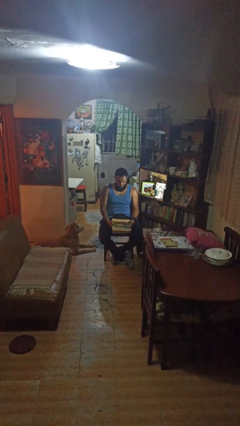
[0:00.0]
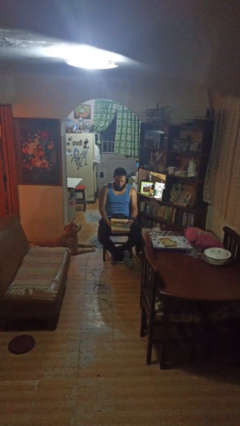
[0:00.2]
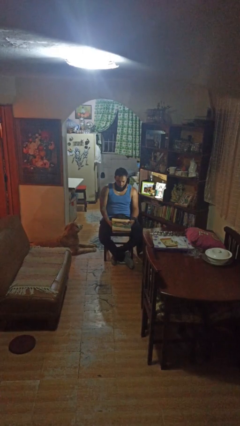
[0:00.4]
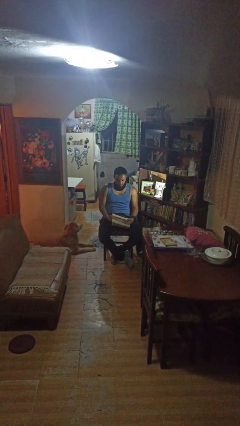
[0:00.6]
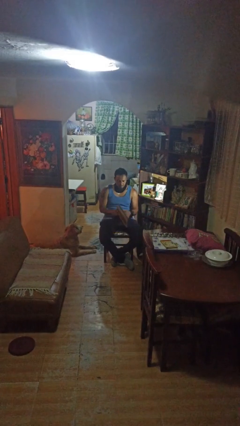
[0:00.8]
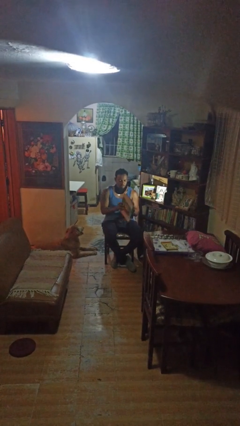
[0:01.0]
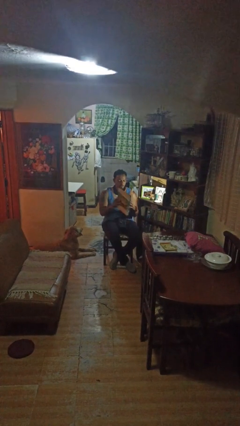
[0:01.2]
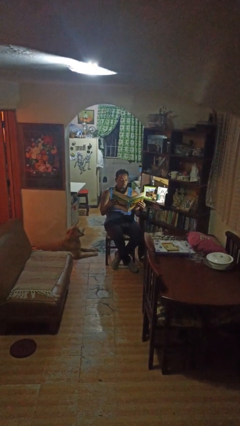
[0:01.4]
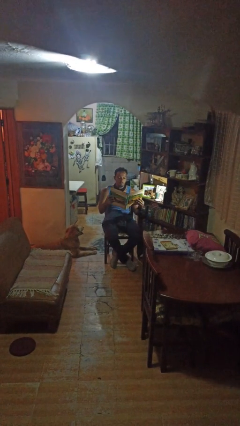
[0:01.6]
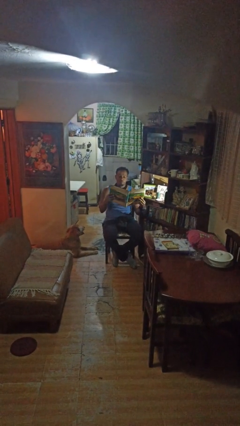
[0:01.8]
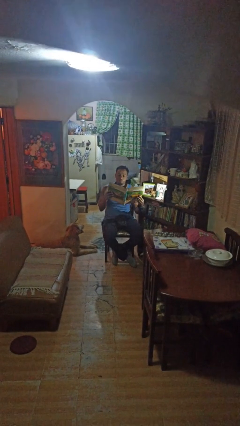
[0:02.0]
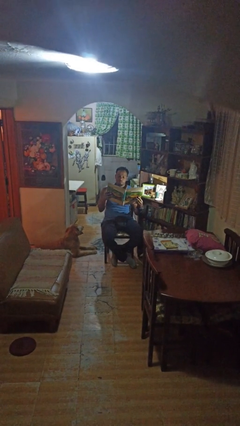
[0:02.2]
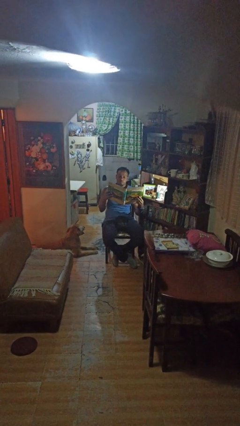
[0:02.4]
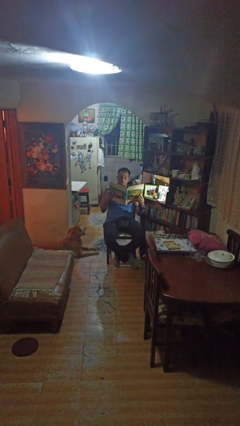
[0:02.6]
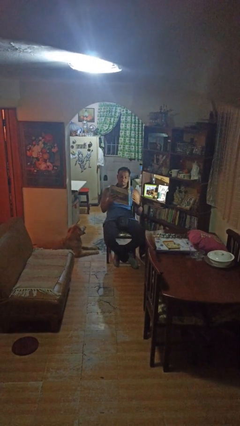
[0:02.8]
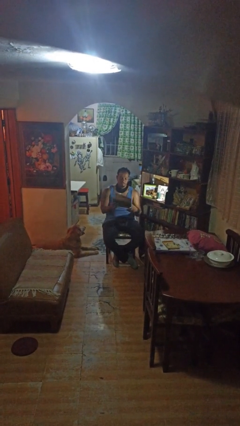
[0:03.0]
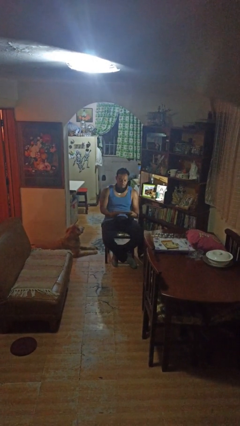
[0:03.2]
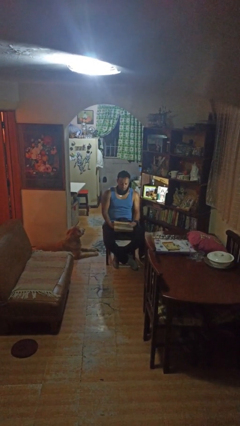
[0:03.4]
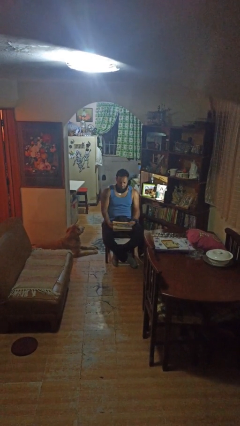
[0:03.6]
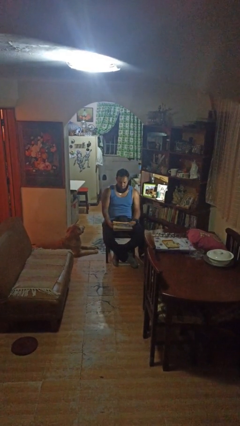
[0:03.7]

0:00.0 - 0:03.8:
person reads document

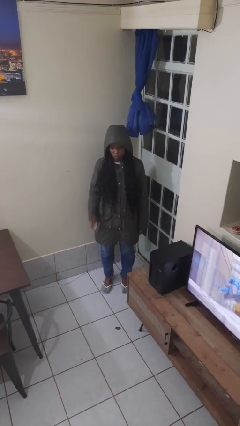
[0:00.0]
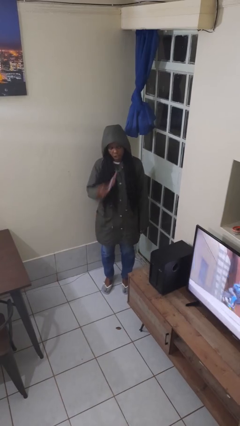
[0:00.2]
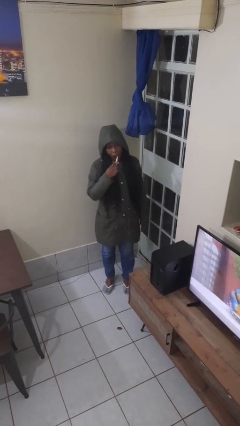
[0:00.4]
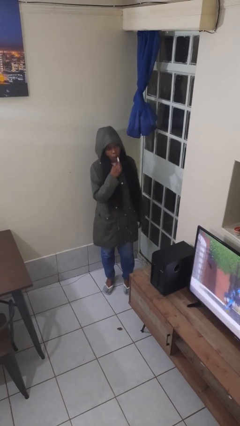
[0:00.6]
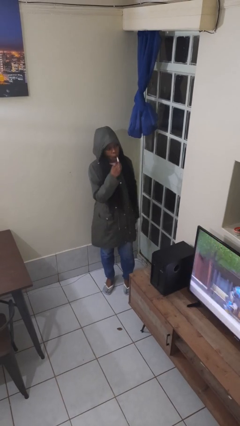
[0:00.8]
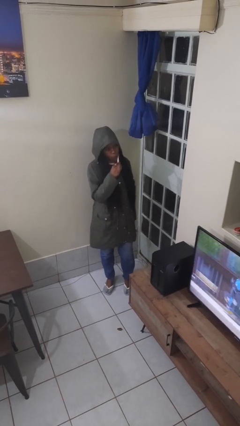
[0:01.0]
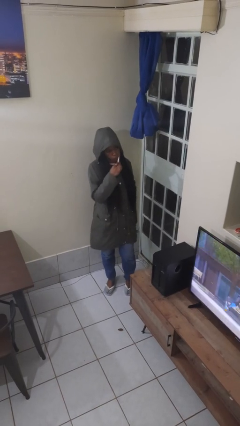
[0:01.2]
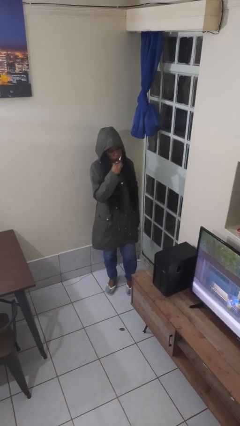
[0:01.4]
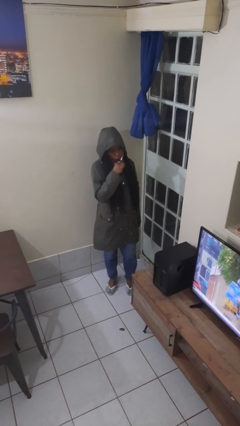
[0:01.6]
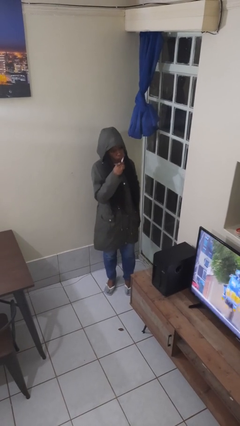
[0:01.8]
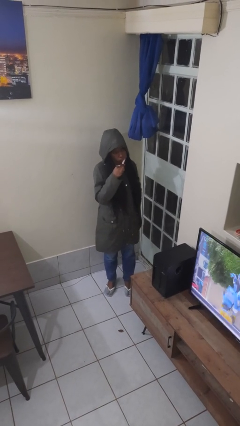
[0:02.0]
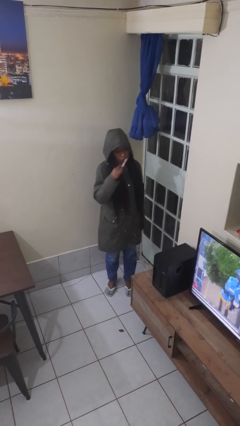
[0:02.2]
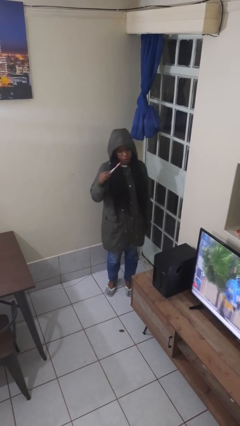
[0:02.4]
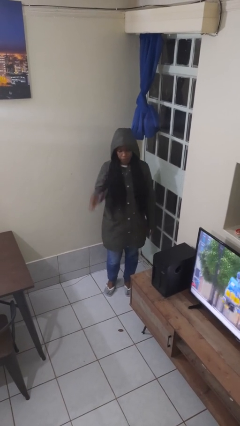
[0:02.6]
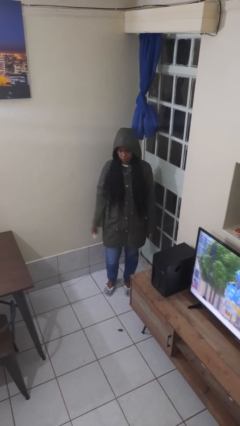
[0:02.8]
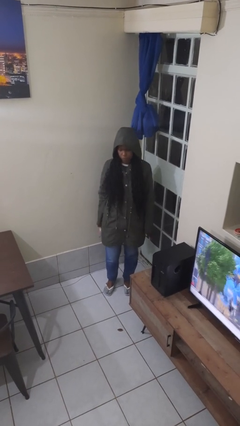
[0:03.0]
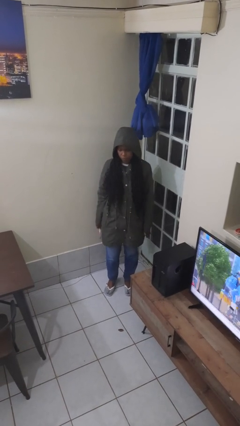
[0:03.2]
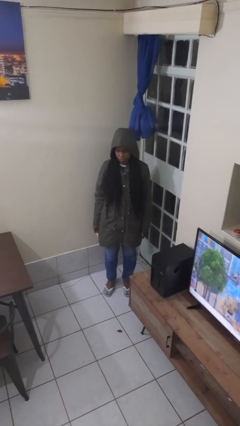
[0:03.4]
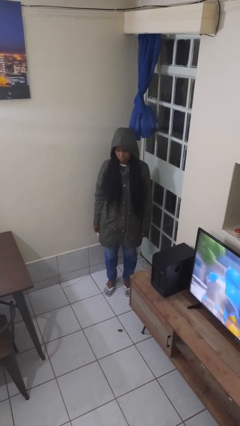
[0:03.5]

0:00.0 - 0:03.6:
person brushes teeth

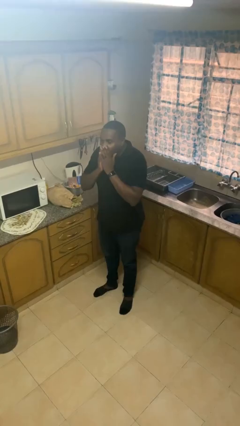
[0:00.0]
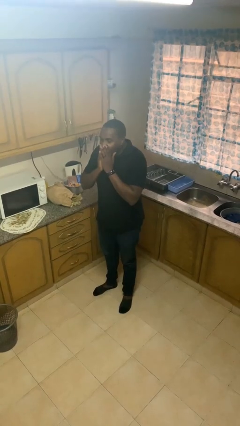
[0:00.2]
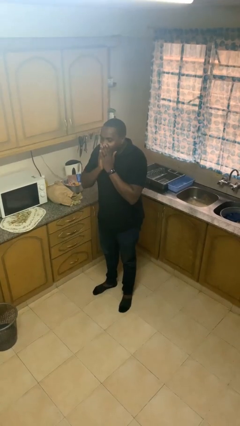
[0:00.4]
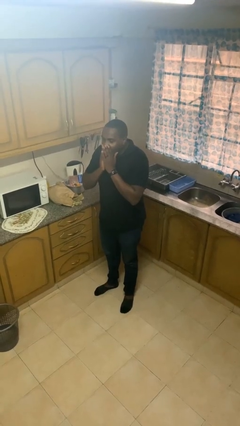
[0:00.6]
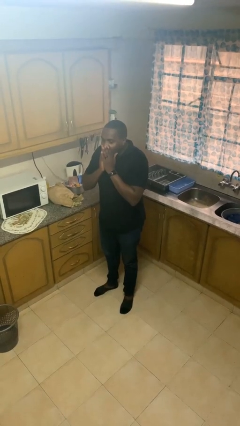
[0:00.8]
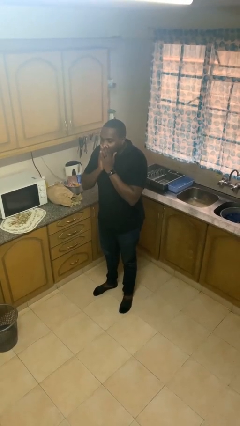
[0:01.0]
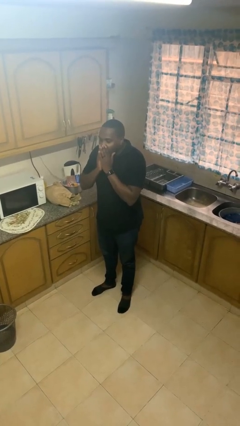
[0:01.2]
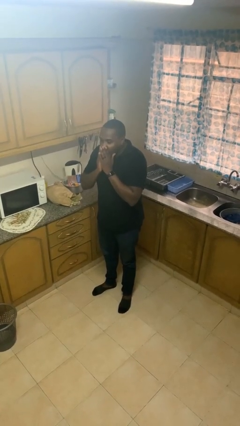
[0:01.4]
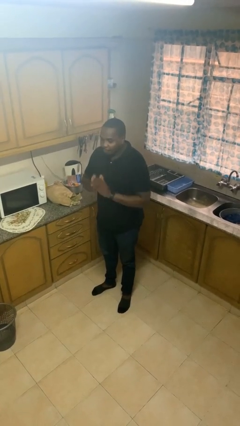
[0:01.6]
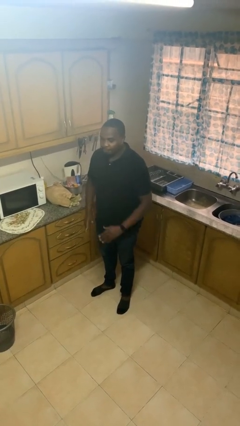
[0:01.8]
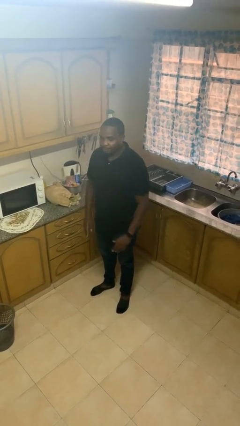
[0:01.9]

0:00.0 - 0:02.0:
person yawns

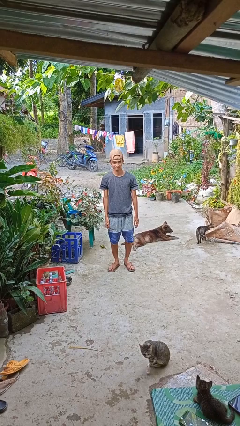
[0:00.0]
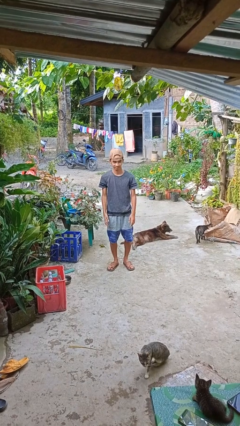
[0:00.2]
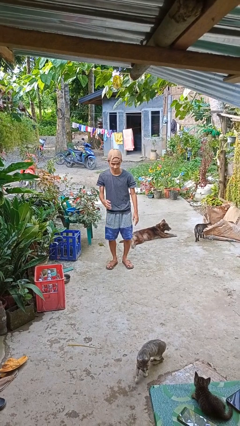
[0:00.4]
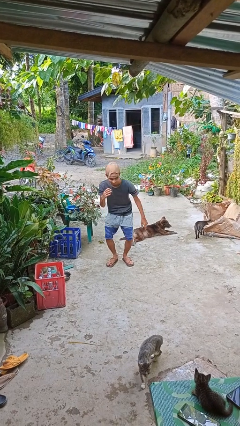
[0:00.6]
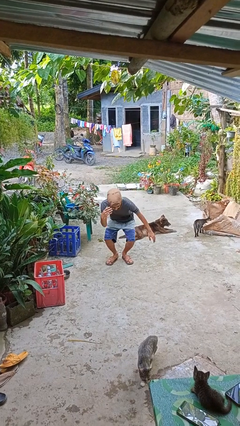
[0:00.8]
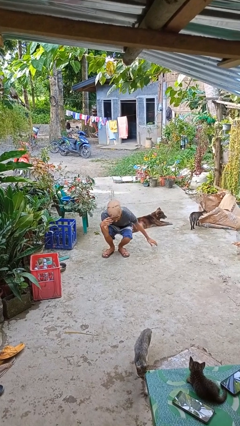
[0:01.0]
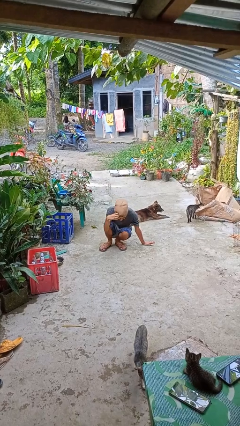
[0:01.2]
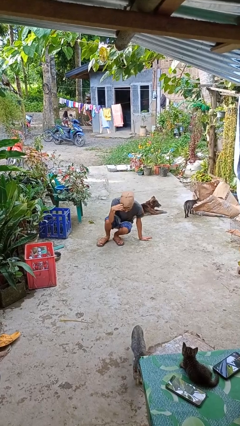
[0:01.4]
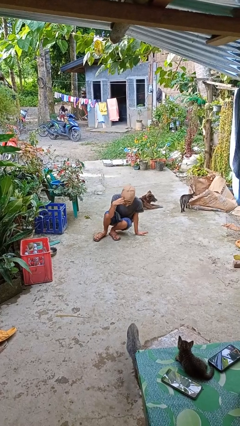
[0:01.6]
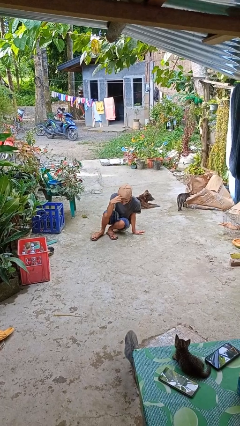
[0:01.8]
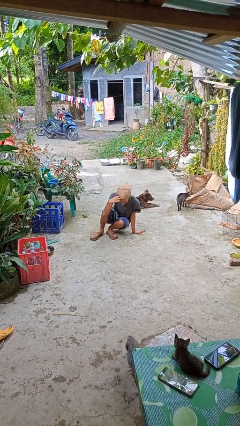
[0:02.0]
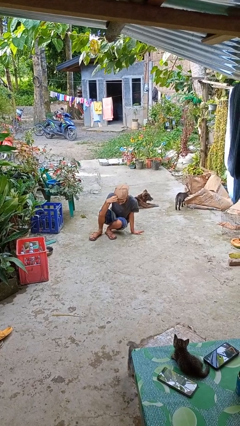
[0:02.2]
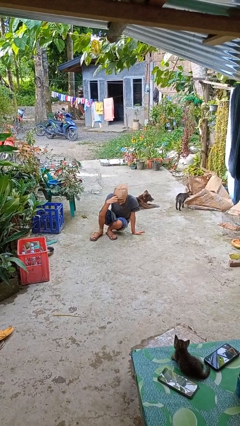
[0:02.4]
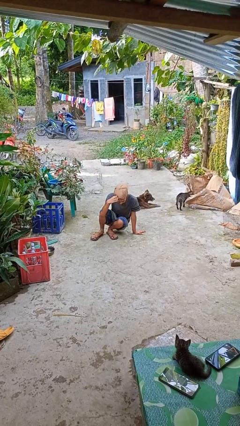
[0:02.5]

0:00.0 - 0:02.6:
person falls while standing

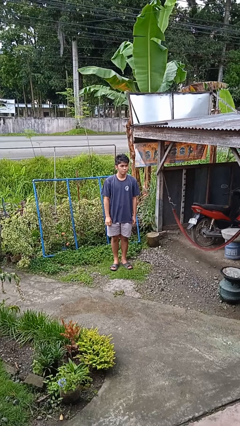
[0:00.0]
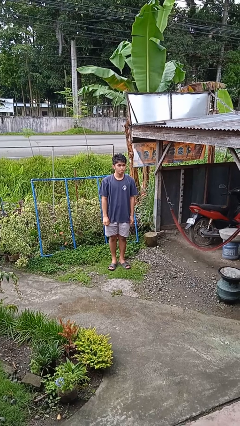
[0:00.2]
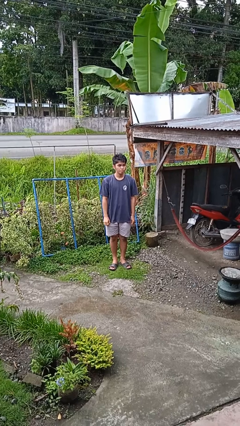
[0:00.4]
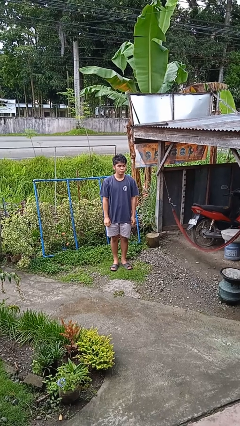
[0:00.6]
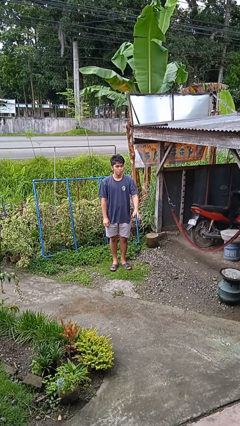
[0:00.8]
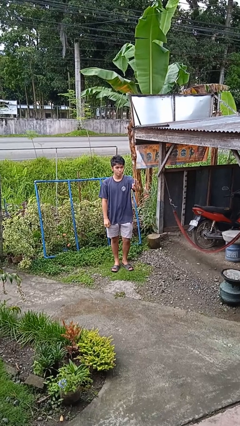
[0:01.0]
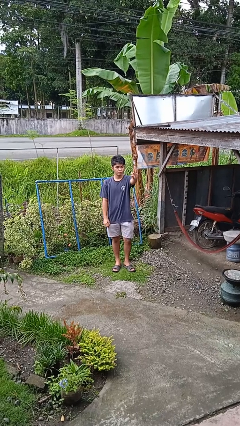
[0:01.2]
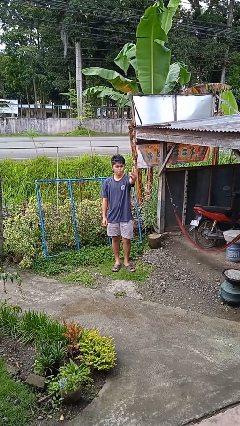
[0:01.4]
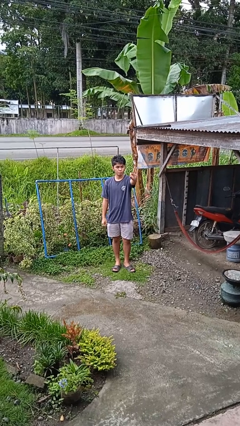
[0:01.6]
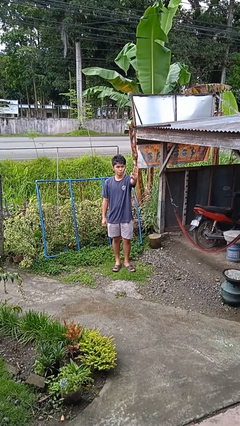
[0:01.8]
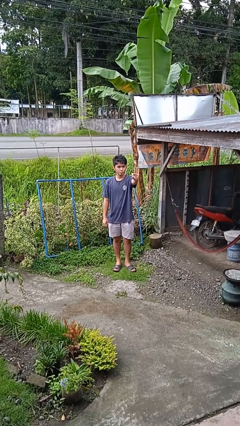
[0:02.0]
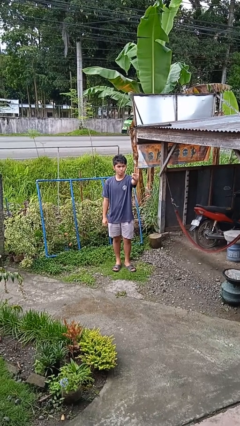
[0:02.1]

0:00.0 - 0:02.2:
person gestures number three

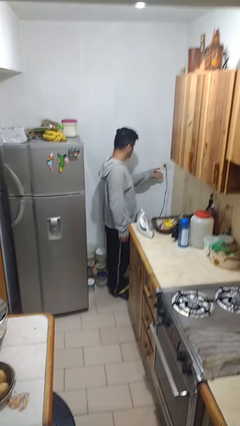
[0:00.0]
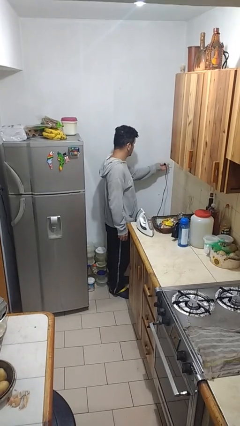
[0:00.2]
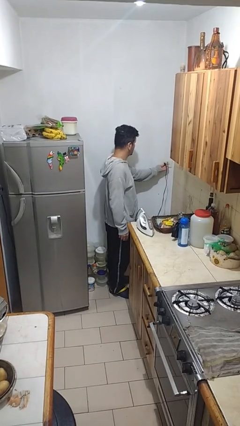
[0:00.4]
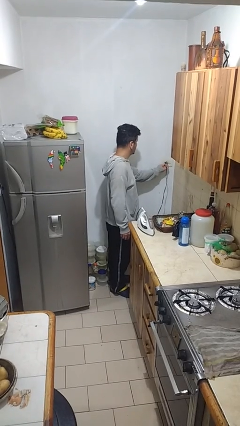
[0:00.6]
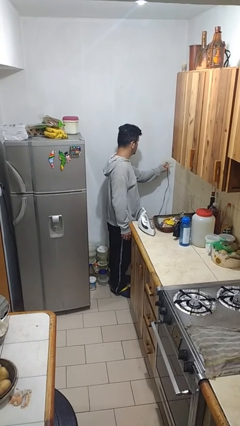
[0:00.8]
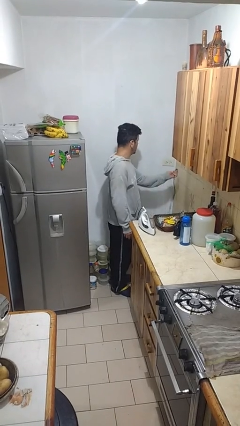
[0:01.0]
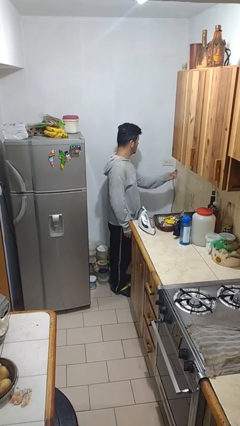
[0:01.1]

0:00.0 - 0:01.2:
person unplugs from electrical socket

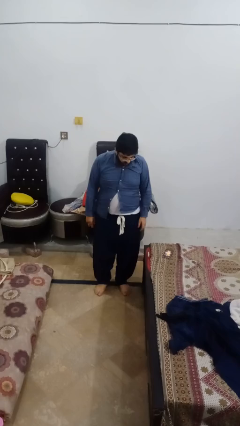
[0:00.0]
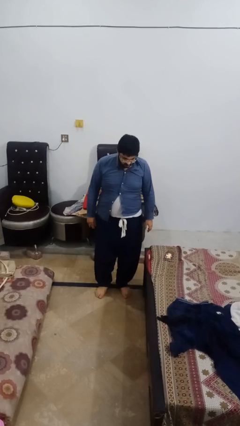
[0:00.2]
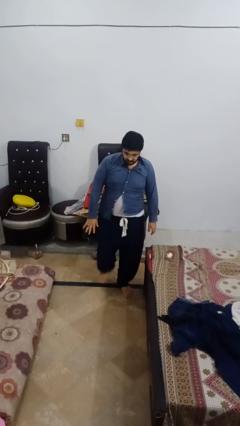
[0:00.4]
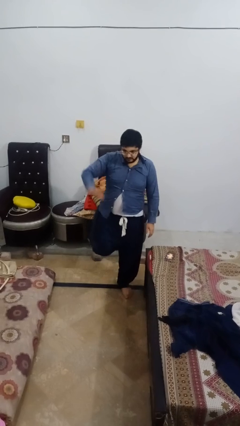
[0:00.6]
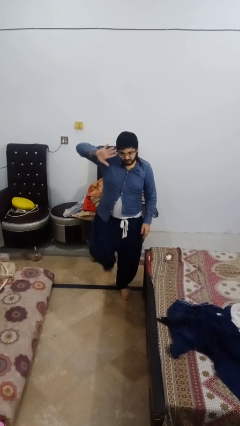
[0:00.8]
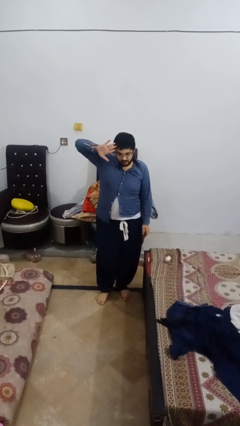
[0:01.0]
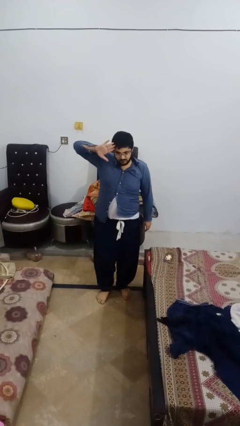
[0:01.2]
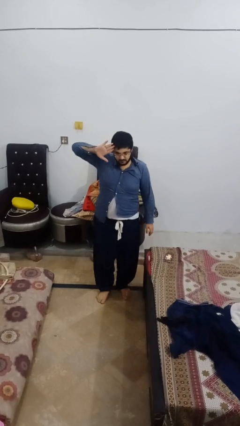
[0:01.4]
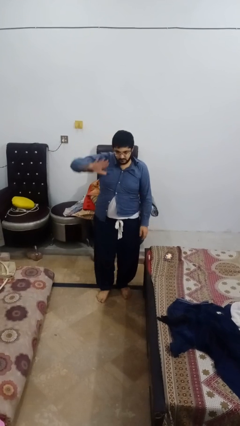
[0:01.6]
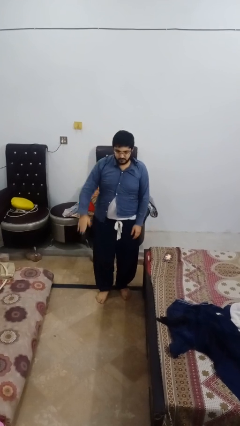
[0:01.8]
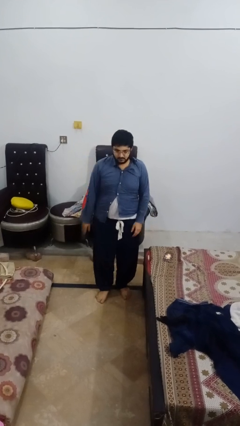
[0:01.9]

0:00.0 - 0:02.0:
person salutes
